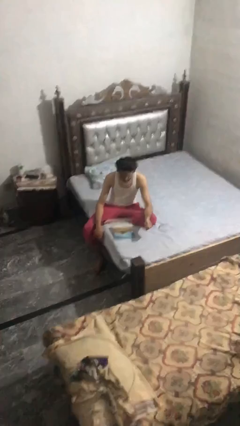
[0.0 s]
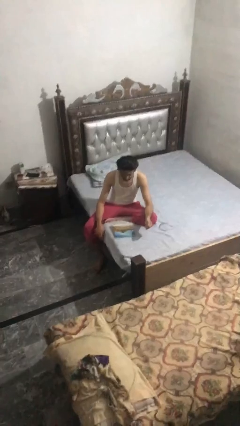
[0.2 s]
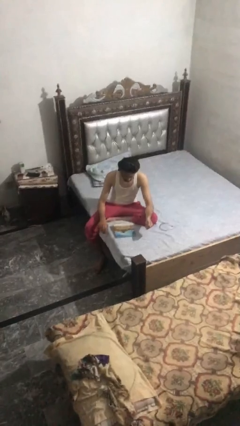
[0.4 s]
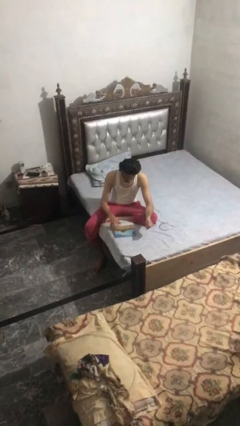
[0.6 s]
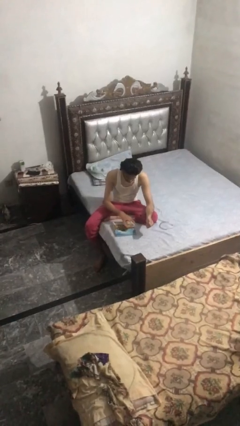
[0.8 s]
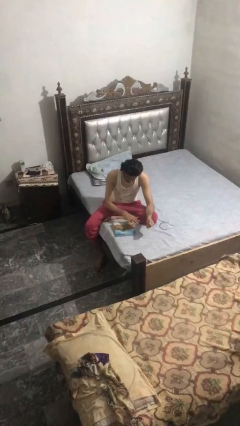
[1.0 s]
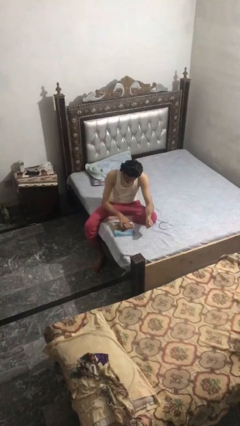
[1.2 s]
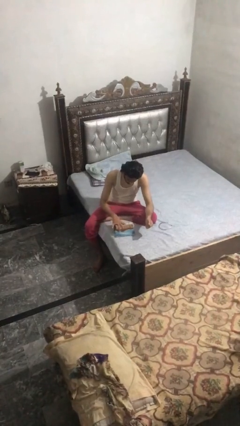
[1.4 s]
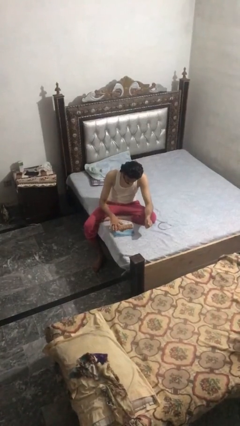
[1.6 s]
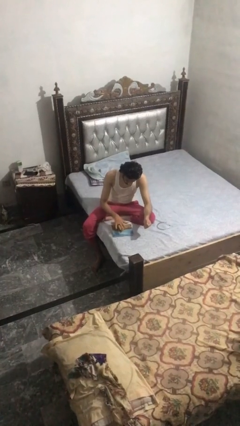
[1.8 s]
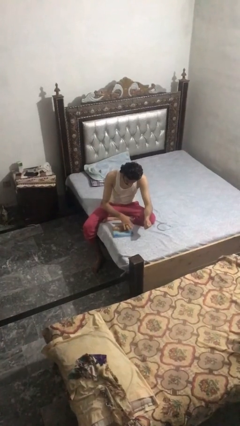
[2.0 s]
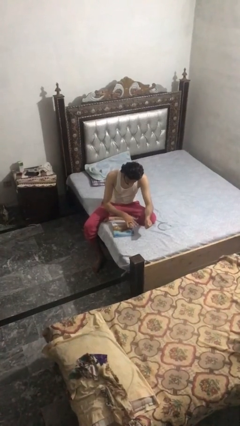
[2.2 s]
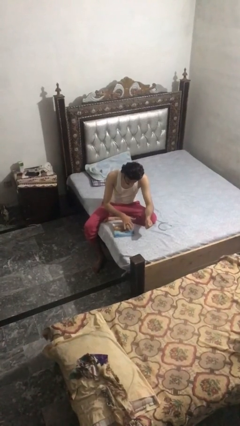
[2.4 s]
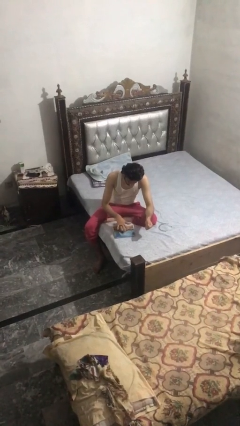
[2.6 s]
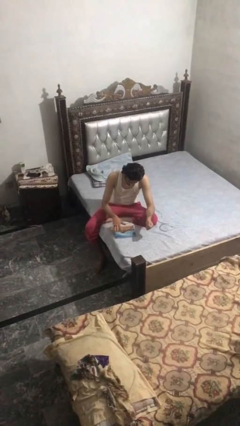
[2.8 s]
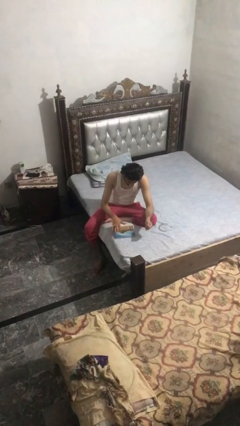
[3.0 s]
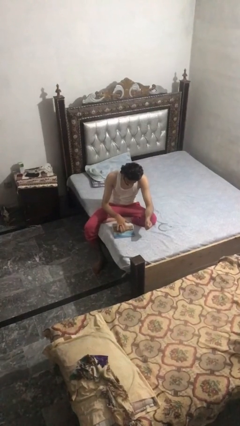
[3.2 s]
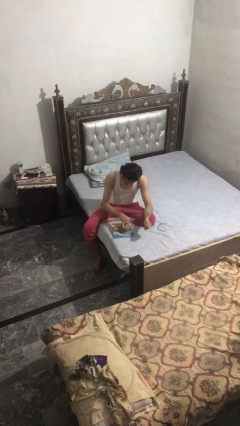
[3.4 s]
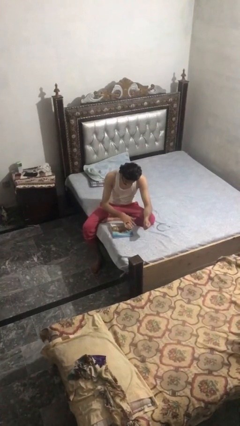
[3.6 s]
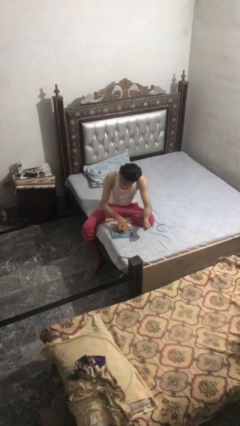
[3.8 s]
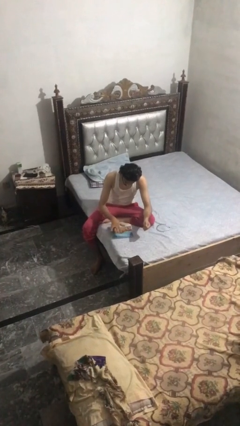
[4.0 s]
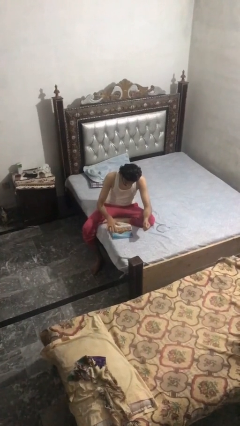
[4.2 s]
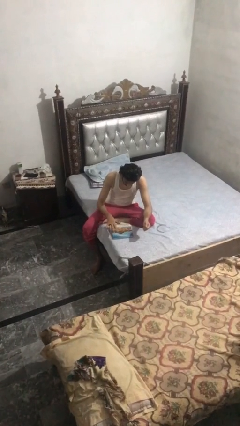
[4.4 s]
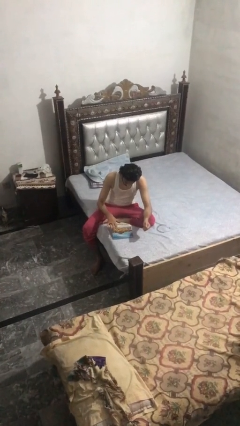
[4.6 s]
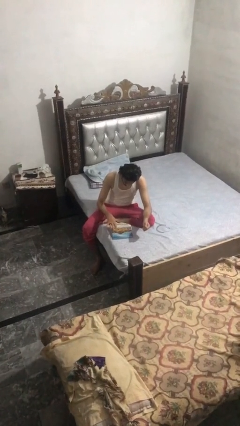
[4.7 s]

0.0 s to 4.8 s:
person waves hand over object

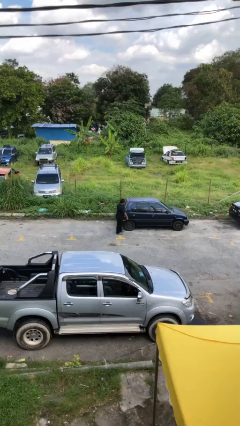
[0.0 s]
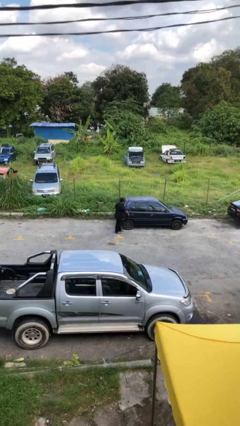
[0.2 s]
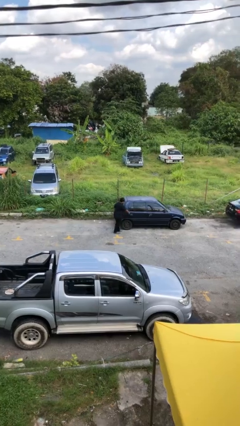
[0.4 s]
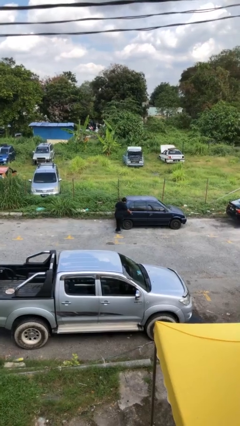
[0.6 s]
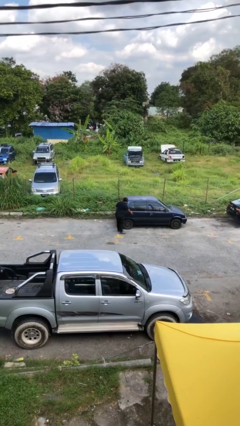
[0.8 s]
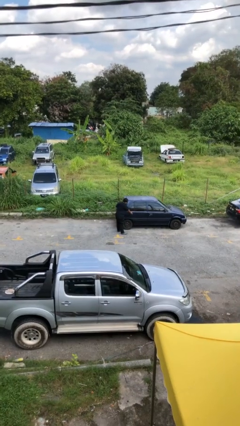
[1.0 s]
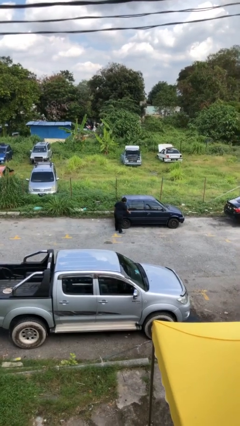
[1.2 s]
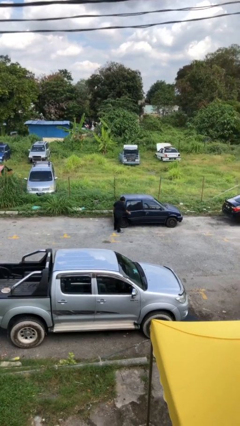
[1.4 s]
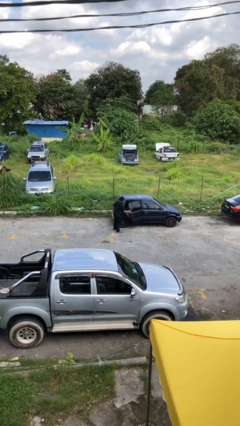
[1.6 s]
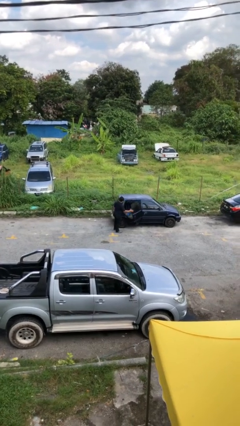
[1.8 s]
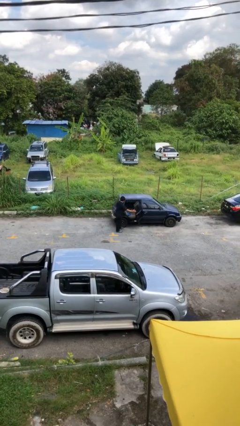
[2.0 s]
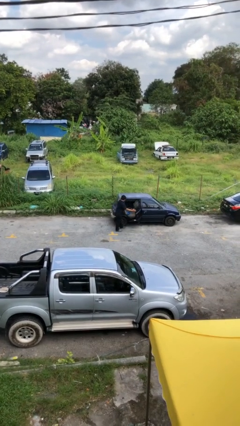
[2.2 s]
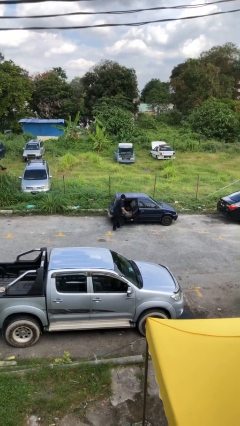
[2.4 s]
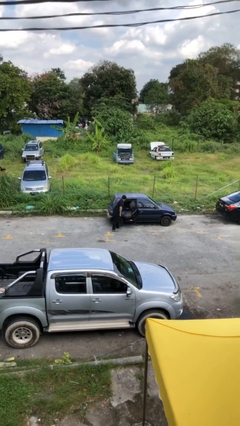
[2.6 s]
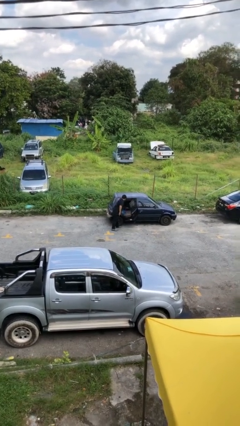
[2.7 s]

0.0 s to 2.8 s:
person opens car door

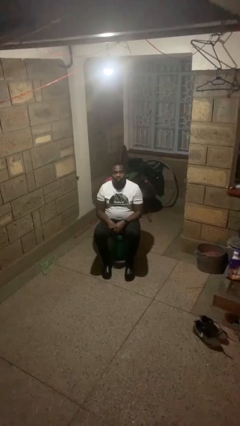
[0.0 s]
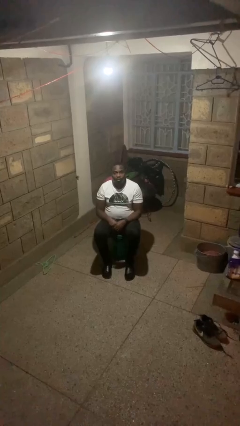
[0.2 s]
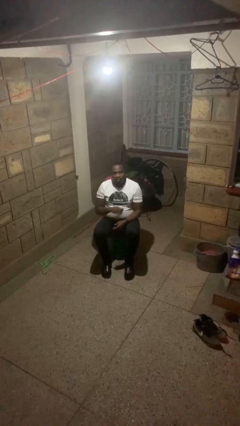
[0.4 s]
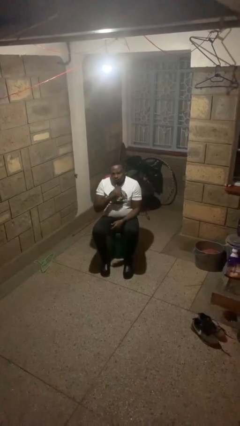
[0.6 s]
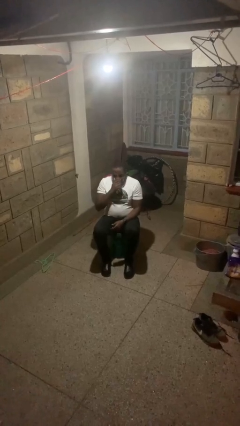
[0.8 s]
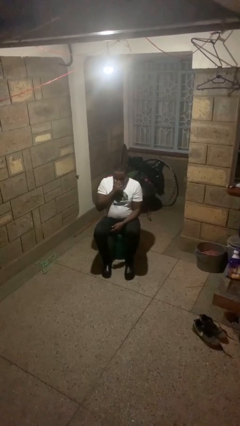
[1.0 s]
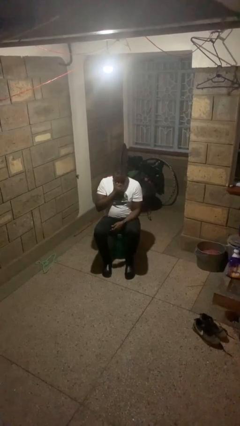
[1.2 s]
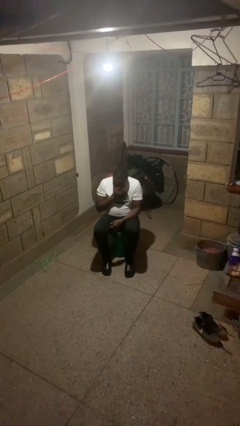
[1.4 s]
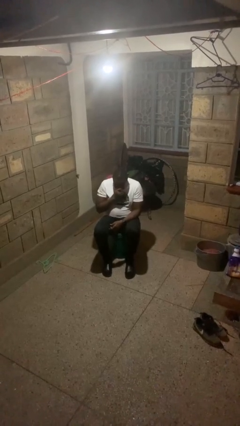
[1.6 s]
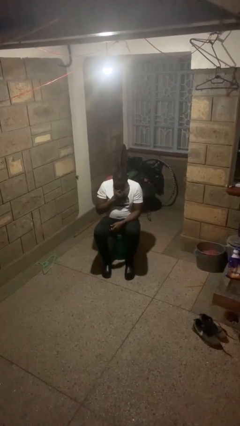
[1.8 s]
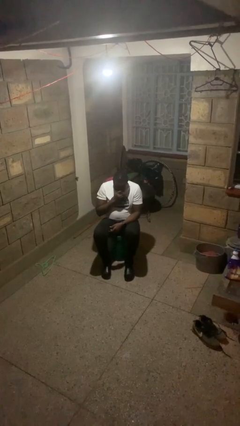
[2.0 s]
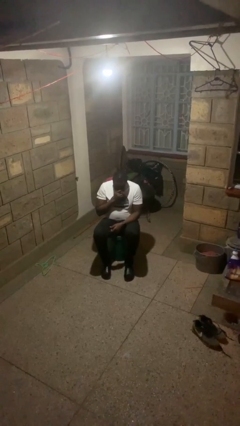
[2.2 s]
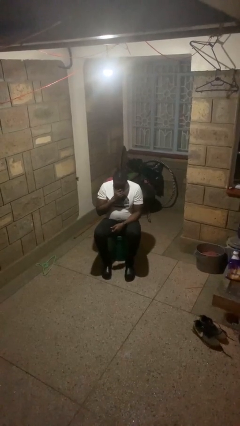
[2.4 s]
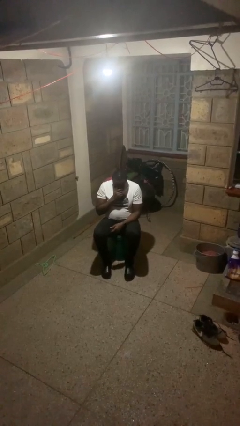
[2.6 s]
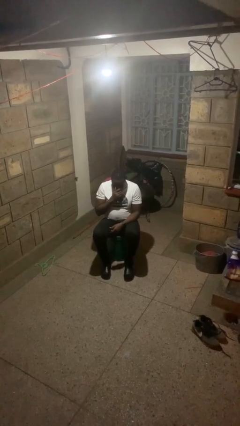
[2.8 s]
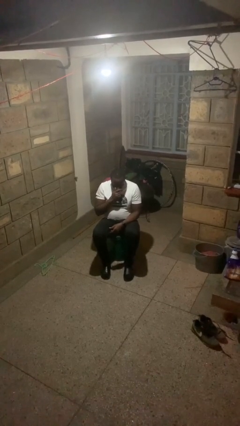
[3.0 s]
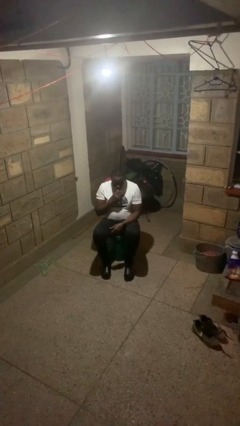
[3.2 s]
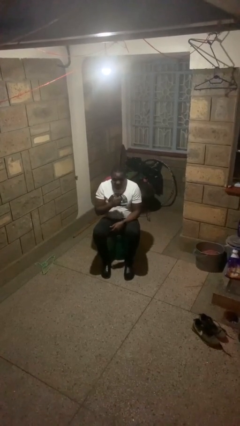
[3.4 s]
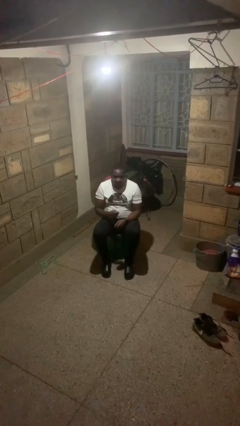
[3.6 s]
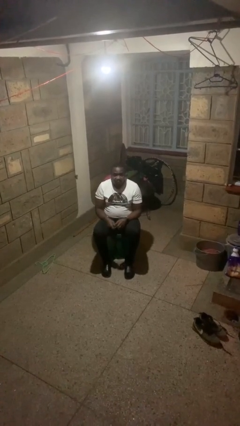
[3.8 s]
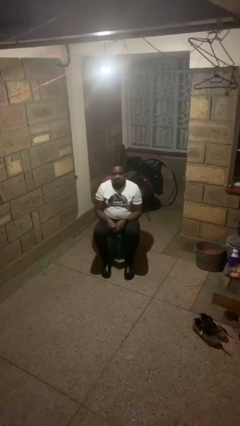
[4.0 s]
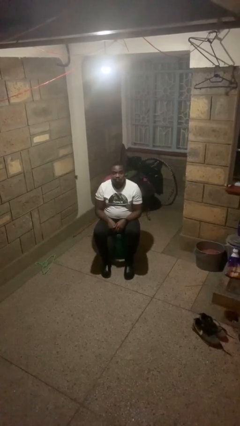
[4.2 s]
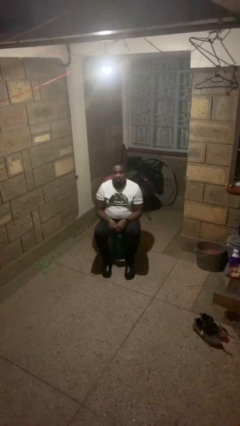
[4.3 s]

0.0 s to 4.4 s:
person sneezes into hand

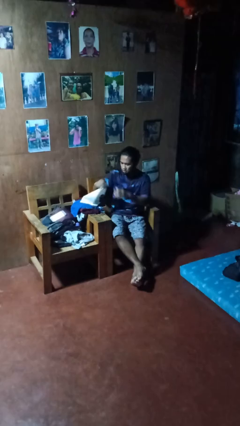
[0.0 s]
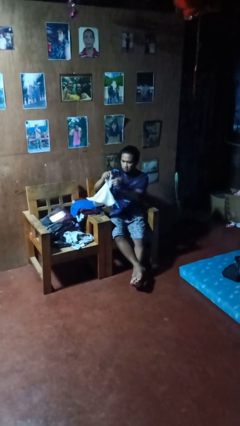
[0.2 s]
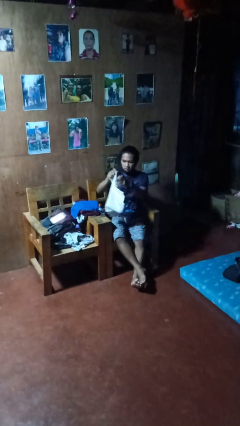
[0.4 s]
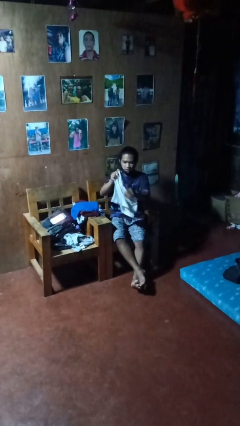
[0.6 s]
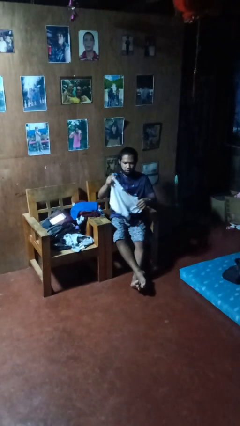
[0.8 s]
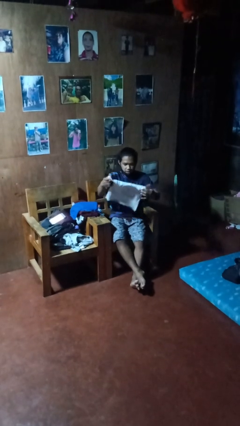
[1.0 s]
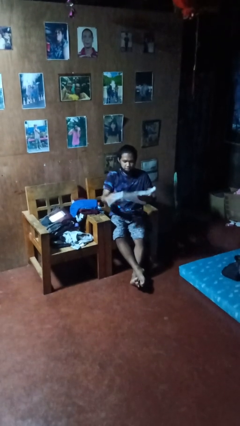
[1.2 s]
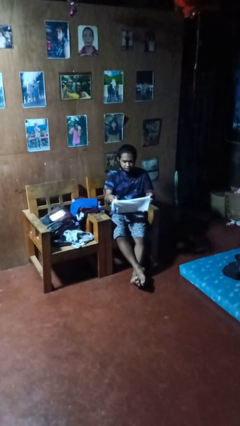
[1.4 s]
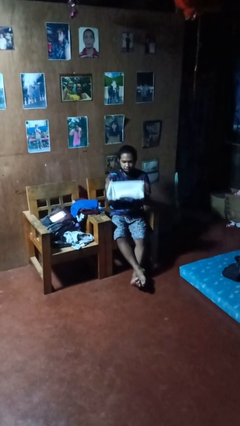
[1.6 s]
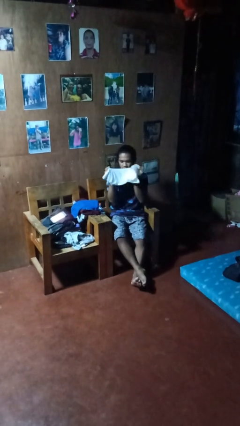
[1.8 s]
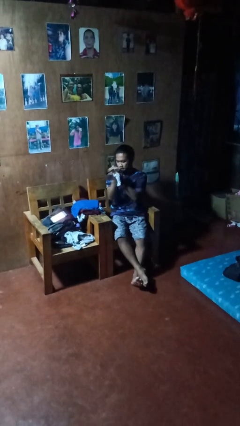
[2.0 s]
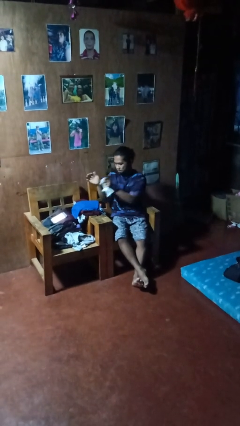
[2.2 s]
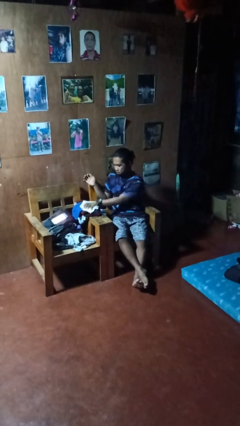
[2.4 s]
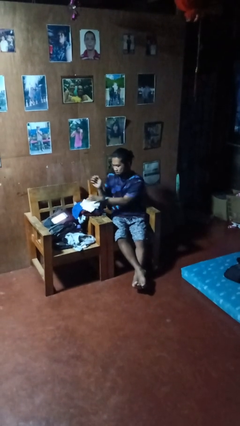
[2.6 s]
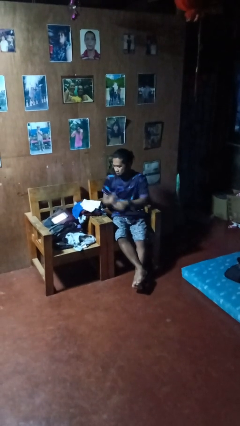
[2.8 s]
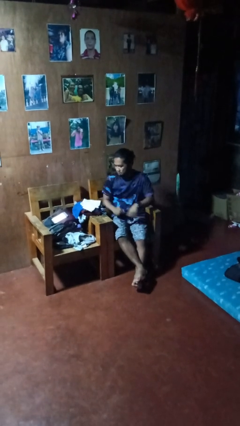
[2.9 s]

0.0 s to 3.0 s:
person folds shirt

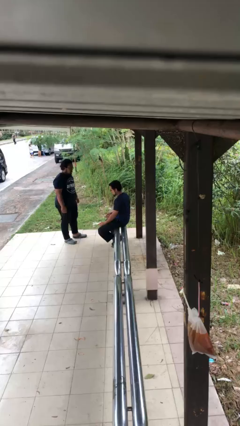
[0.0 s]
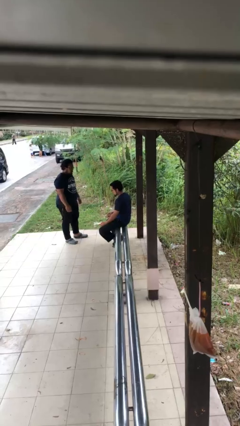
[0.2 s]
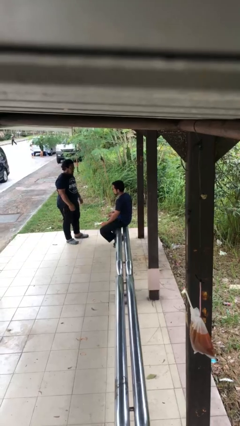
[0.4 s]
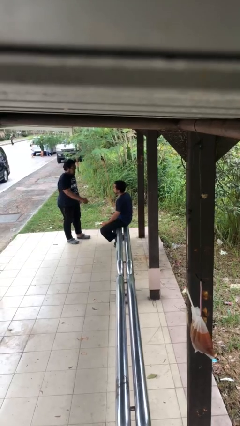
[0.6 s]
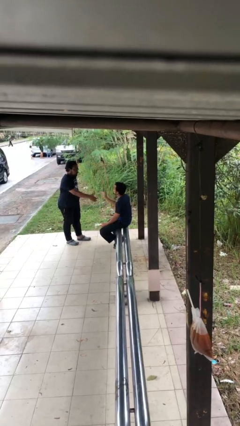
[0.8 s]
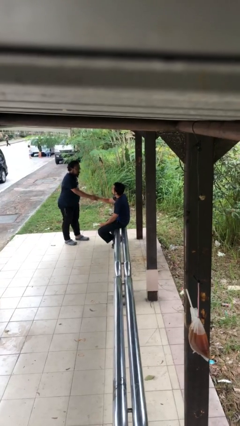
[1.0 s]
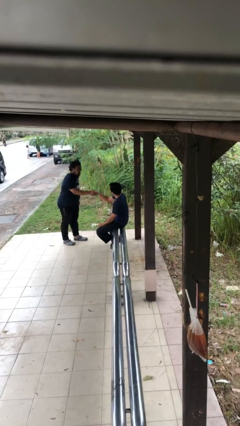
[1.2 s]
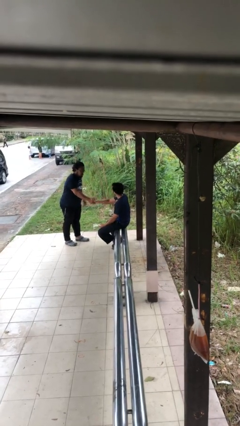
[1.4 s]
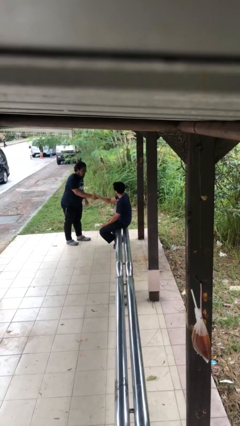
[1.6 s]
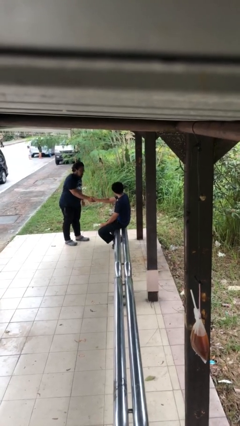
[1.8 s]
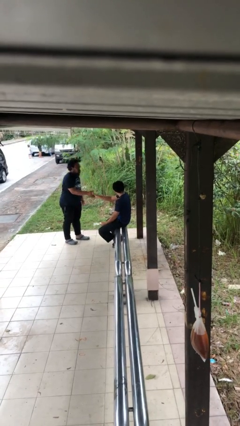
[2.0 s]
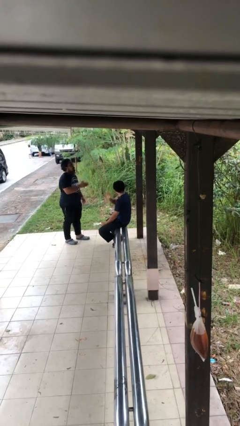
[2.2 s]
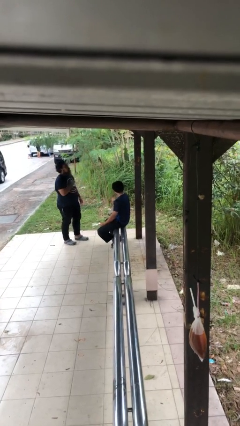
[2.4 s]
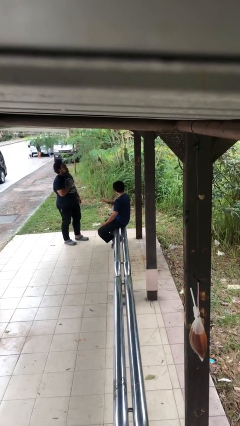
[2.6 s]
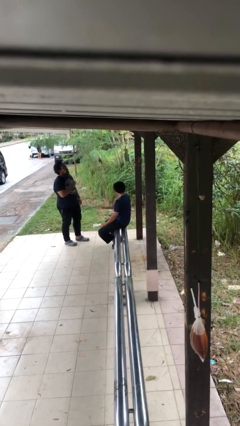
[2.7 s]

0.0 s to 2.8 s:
person shakes hand

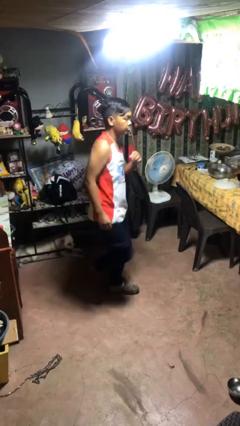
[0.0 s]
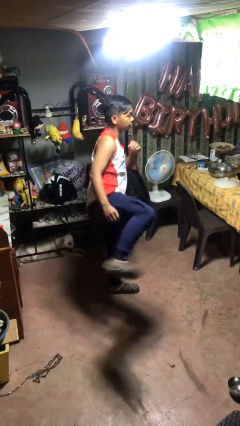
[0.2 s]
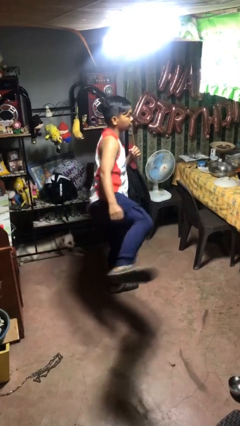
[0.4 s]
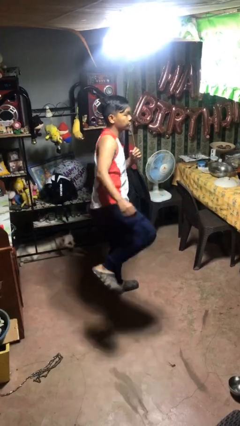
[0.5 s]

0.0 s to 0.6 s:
person karate kicks
